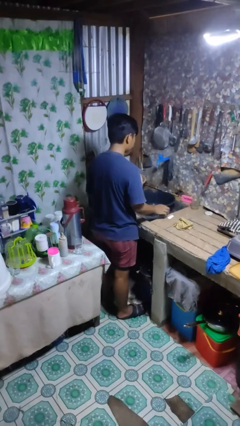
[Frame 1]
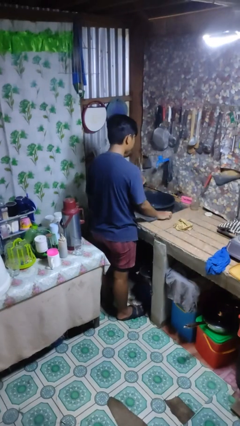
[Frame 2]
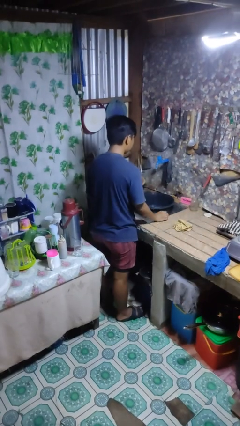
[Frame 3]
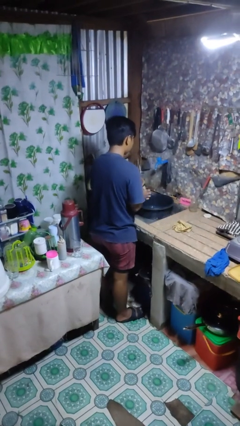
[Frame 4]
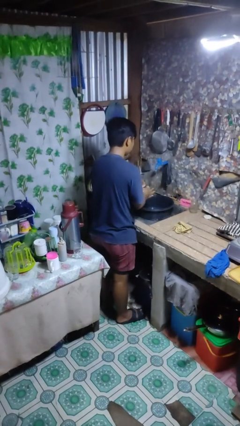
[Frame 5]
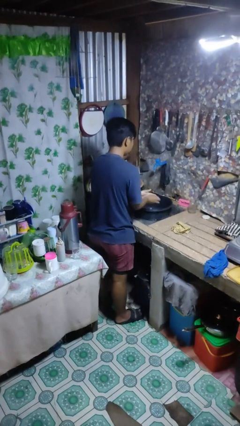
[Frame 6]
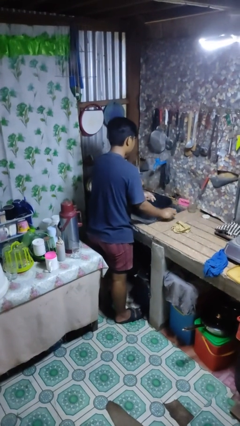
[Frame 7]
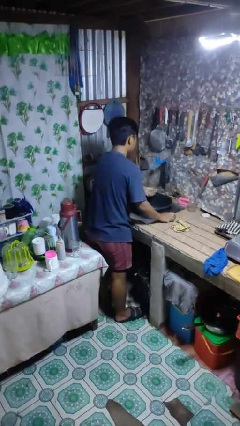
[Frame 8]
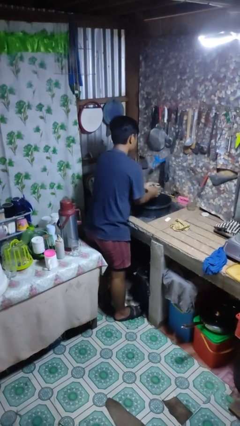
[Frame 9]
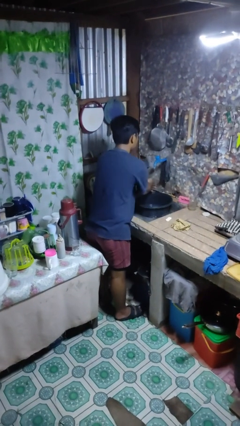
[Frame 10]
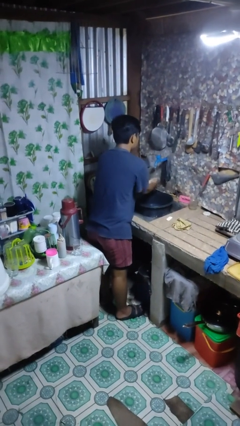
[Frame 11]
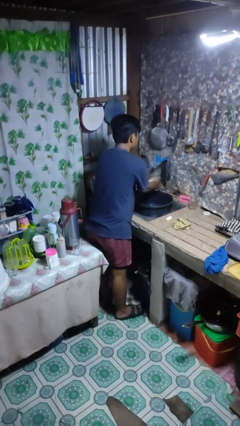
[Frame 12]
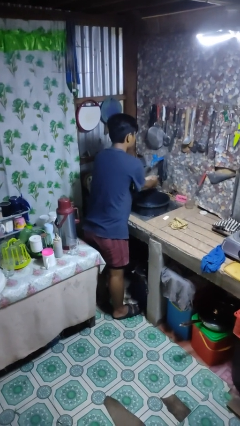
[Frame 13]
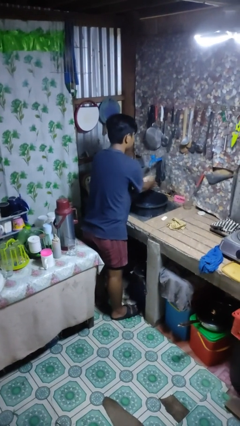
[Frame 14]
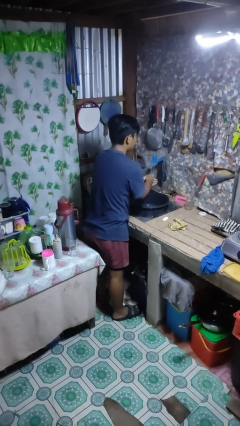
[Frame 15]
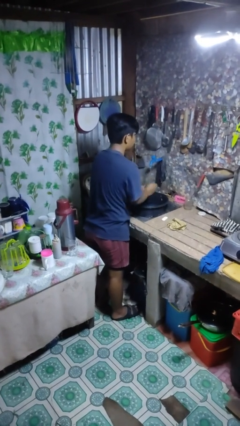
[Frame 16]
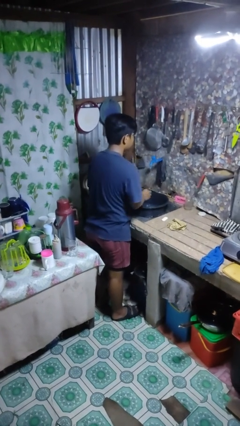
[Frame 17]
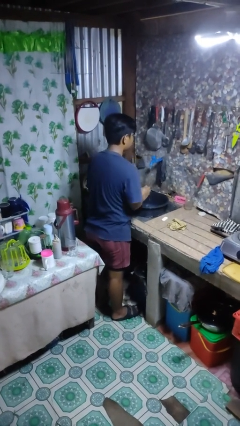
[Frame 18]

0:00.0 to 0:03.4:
person washes hands

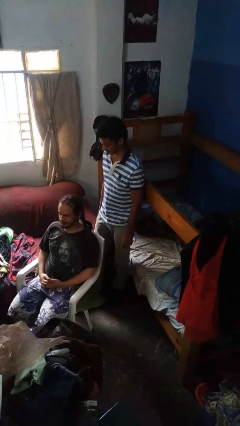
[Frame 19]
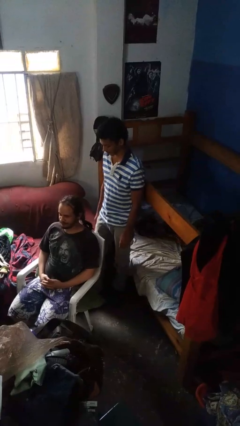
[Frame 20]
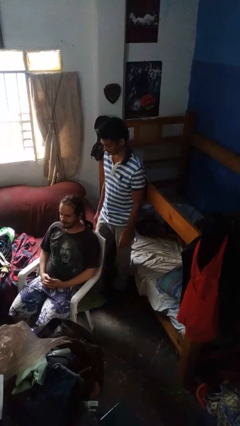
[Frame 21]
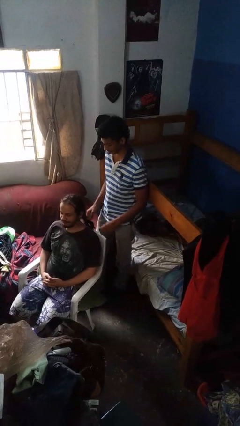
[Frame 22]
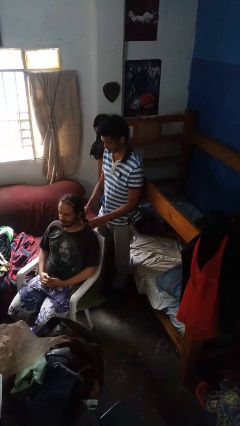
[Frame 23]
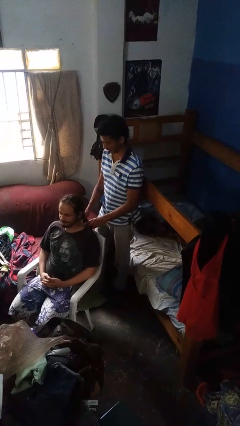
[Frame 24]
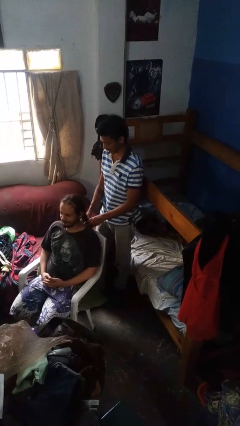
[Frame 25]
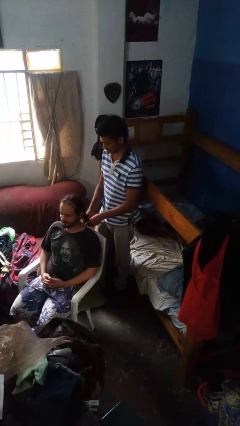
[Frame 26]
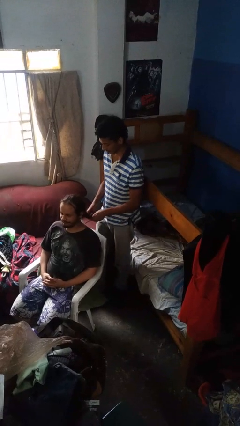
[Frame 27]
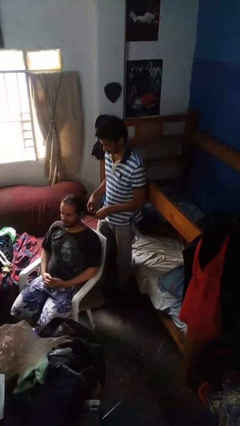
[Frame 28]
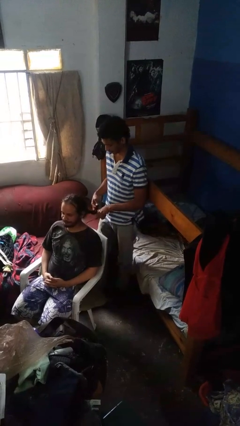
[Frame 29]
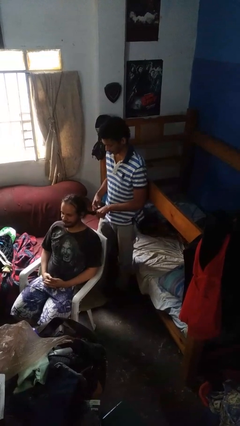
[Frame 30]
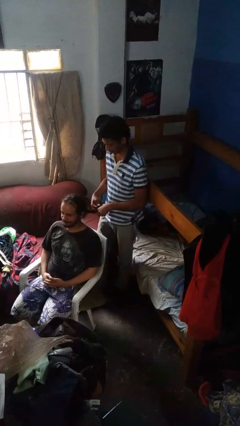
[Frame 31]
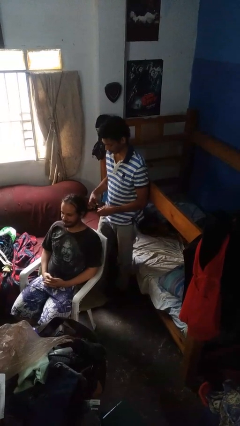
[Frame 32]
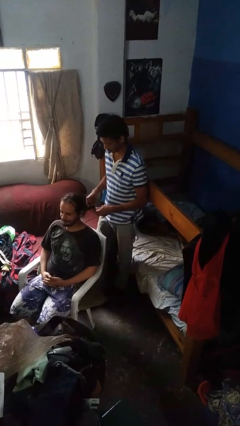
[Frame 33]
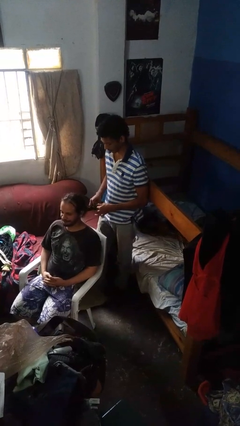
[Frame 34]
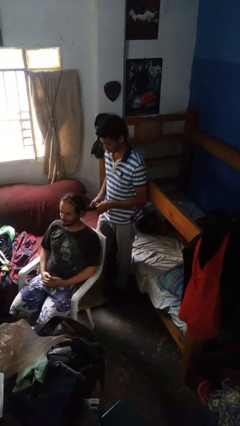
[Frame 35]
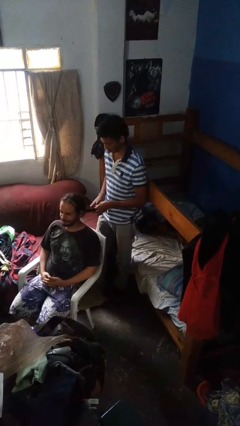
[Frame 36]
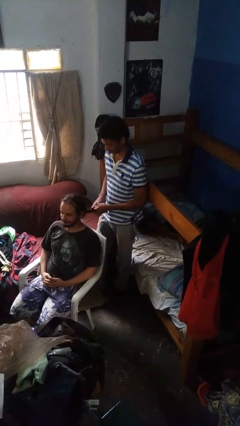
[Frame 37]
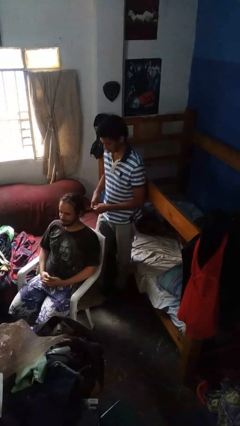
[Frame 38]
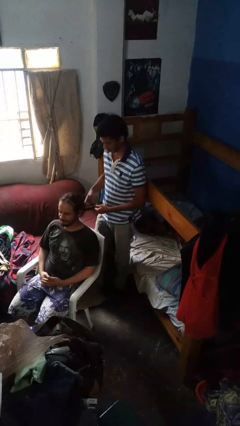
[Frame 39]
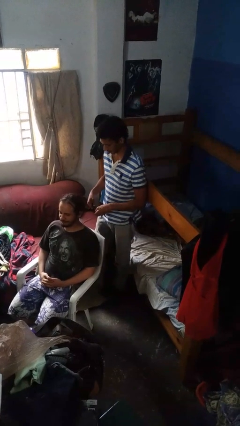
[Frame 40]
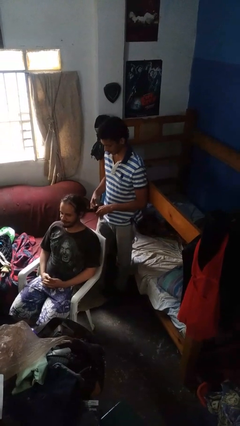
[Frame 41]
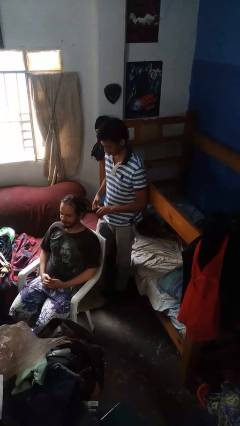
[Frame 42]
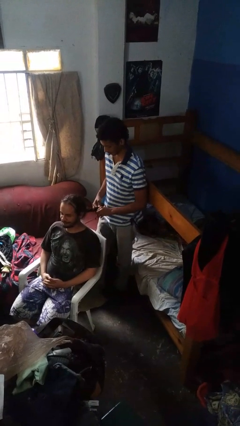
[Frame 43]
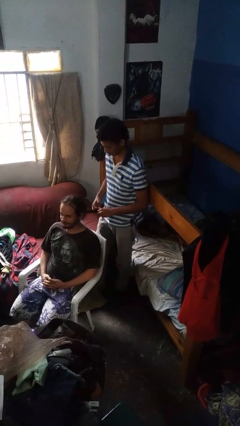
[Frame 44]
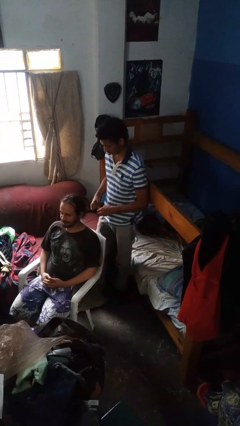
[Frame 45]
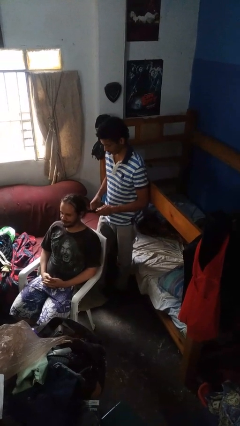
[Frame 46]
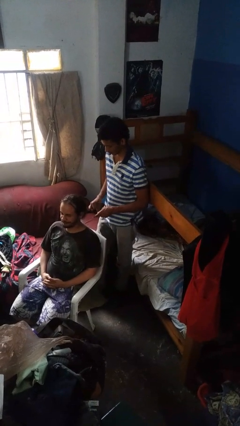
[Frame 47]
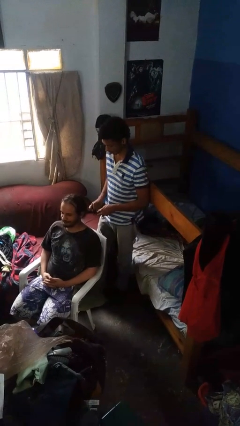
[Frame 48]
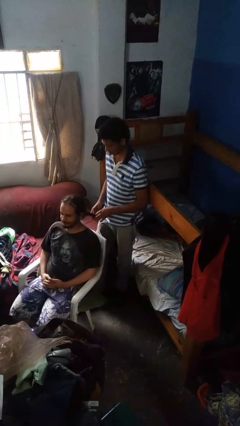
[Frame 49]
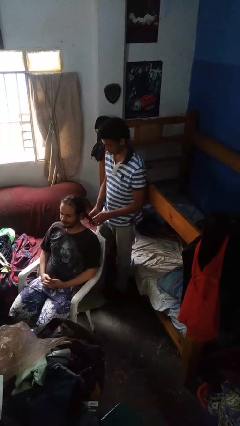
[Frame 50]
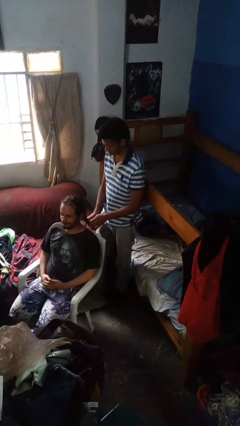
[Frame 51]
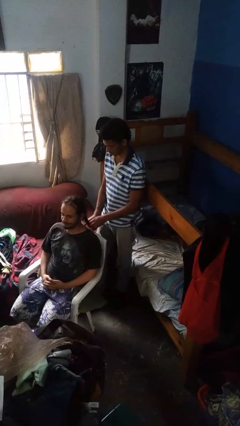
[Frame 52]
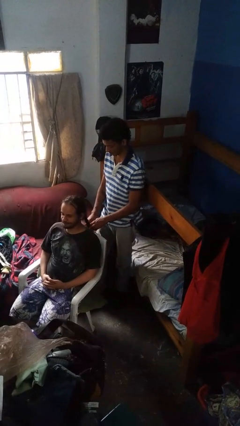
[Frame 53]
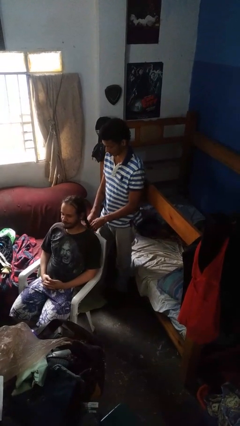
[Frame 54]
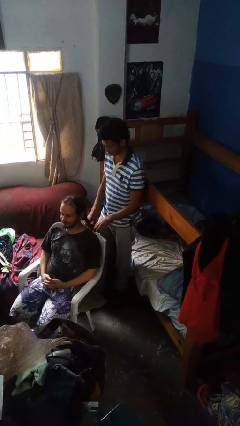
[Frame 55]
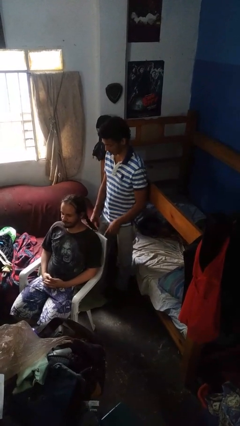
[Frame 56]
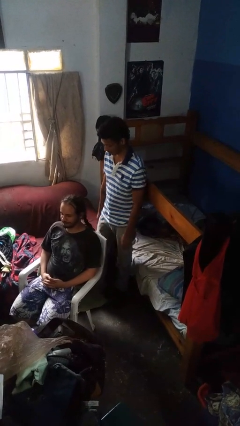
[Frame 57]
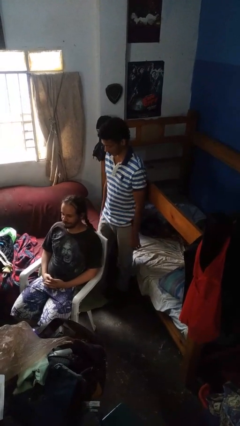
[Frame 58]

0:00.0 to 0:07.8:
person braids hair of person

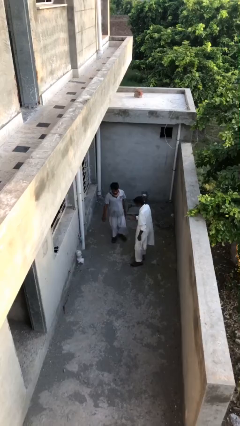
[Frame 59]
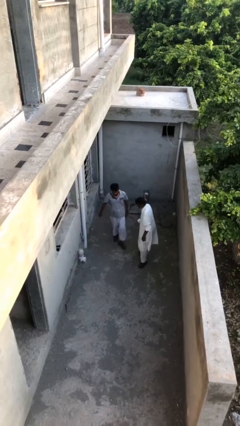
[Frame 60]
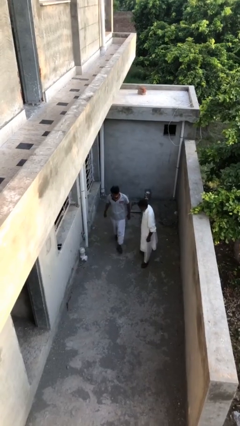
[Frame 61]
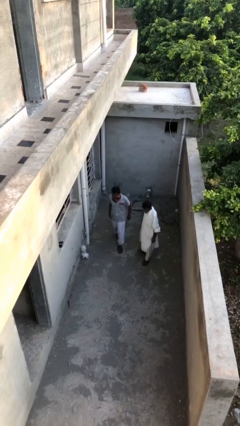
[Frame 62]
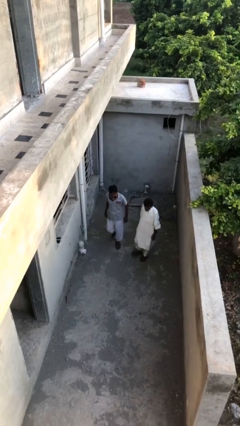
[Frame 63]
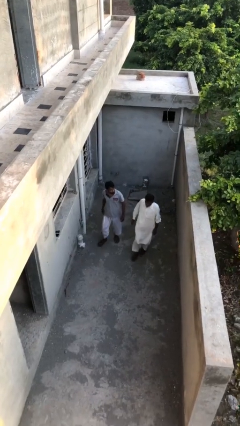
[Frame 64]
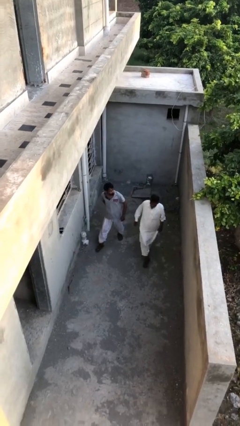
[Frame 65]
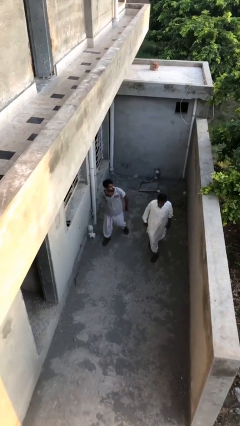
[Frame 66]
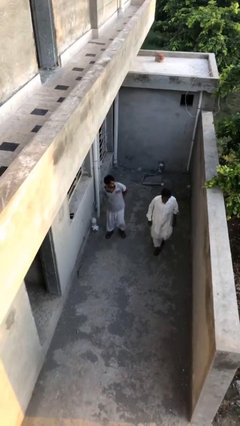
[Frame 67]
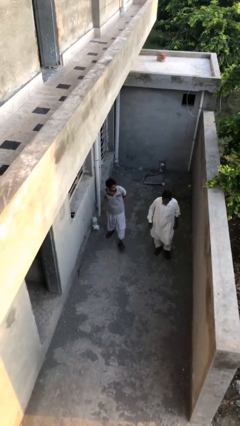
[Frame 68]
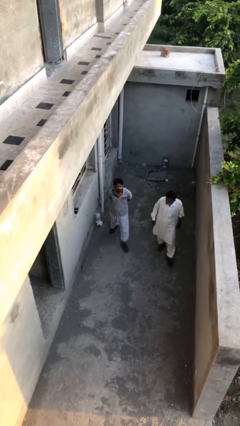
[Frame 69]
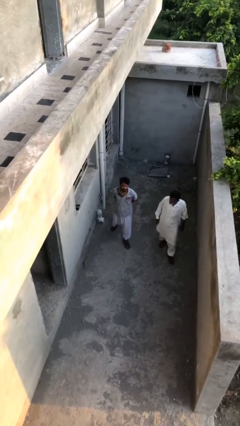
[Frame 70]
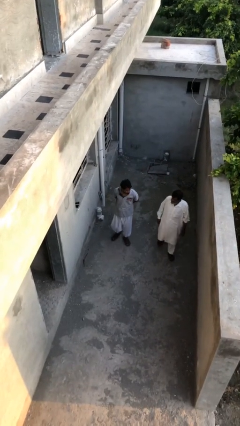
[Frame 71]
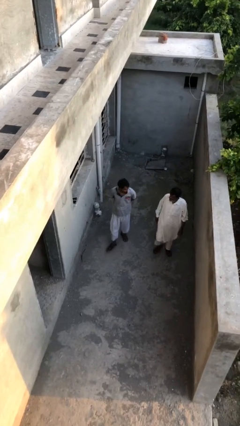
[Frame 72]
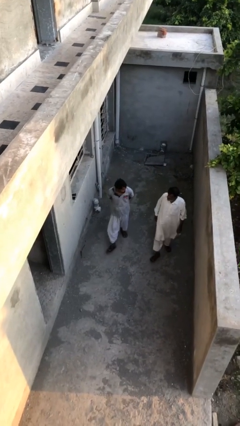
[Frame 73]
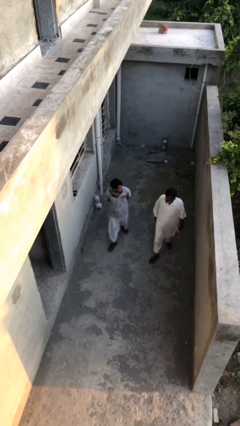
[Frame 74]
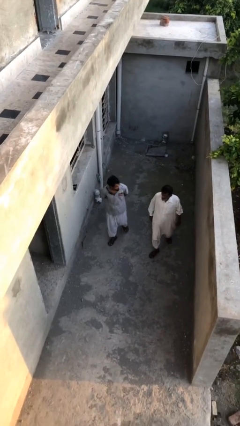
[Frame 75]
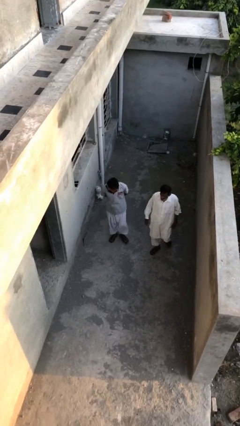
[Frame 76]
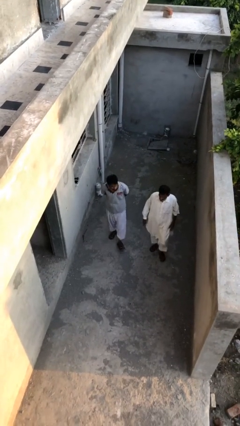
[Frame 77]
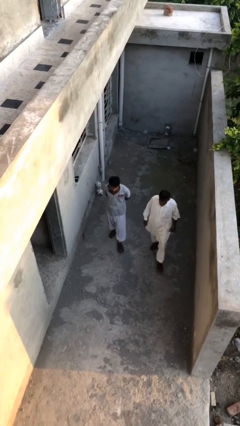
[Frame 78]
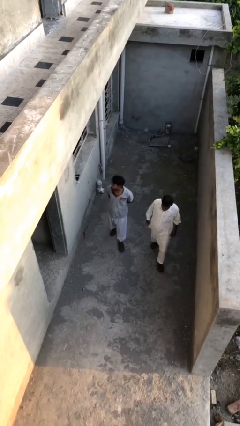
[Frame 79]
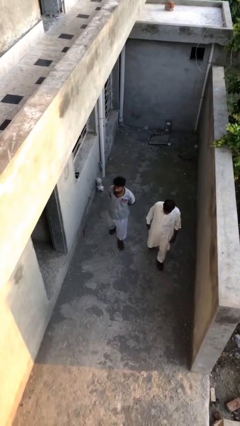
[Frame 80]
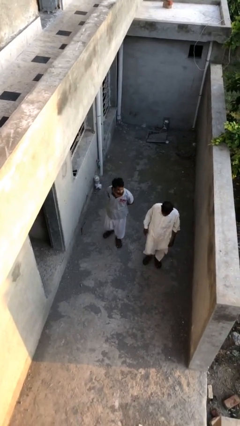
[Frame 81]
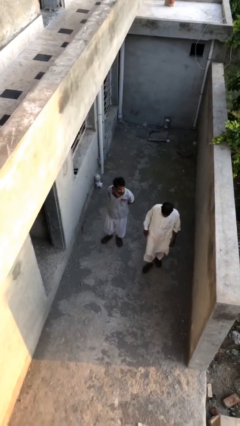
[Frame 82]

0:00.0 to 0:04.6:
person talks to person

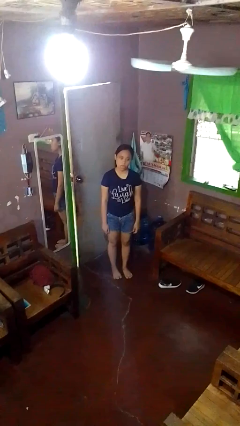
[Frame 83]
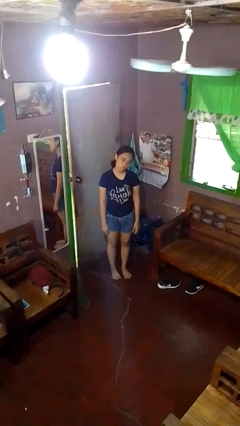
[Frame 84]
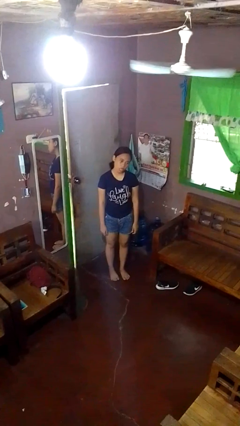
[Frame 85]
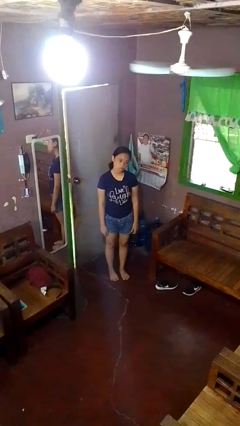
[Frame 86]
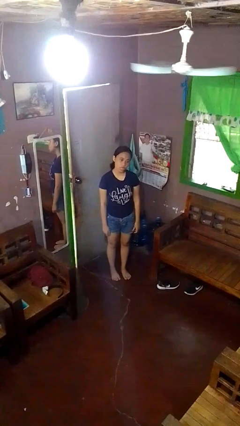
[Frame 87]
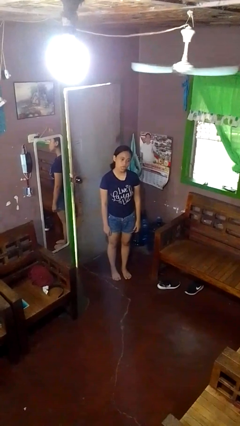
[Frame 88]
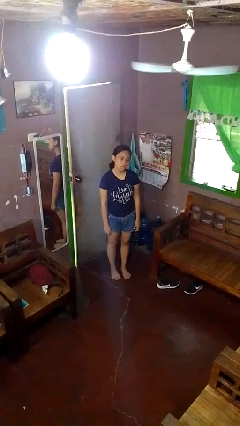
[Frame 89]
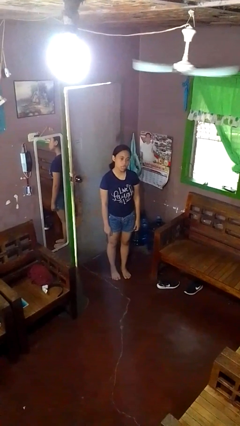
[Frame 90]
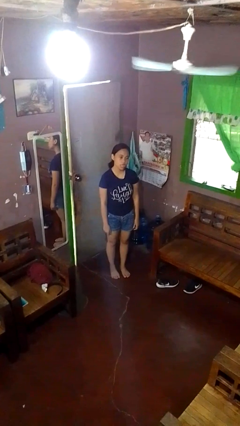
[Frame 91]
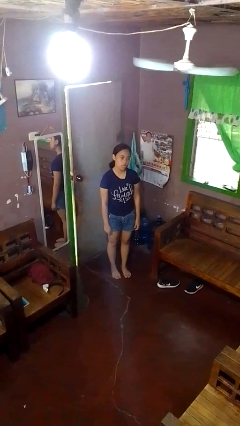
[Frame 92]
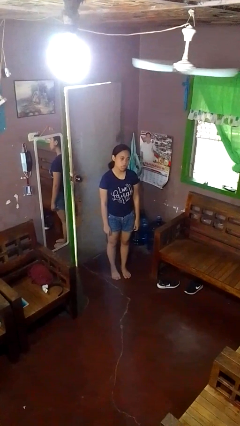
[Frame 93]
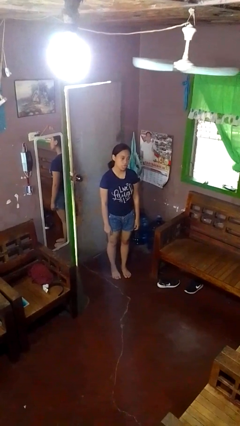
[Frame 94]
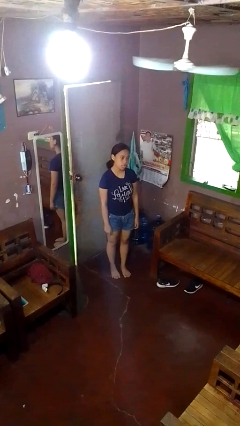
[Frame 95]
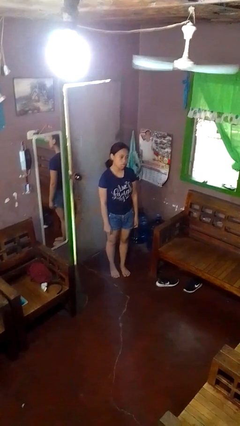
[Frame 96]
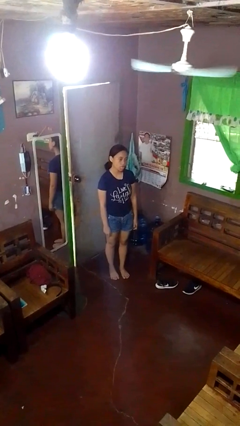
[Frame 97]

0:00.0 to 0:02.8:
person sticks out tongue
